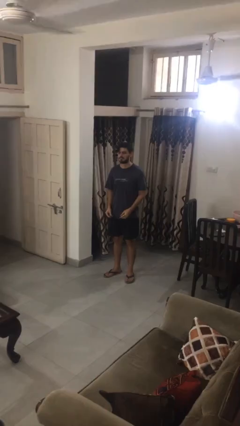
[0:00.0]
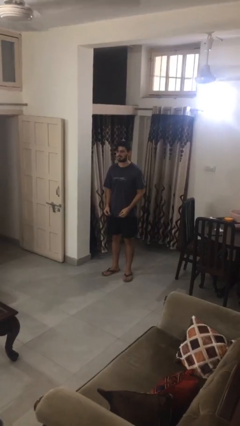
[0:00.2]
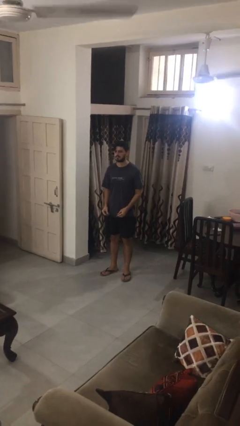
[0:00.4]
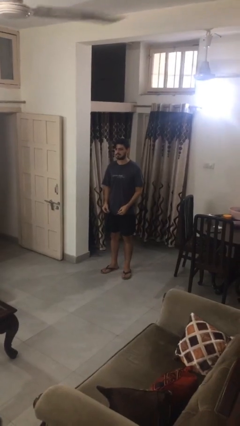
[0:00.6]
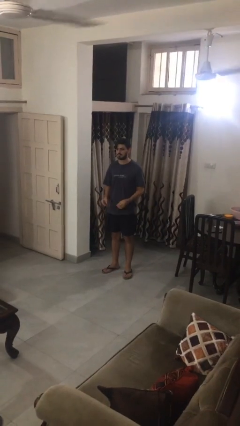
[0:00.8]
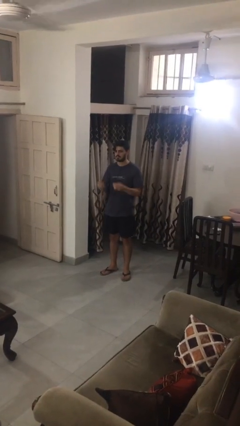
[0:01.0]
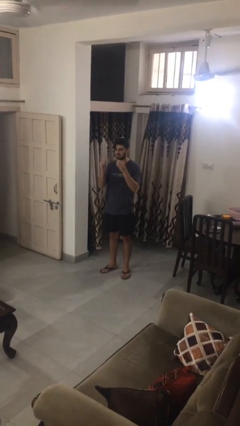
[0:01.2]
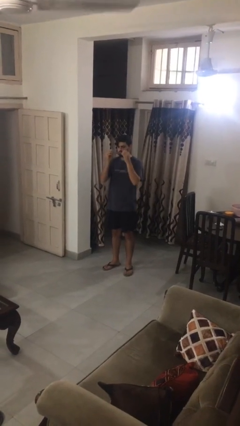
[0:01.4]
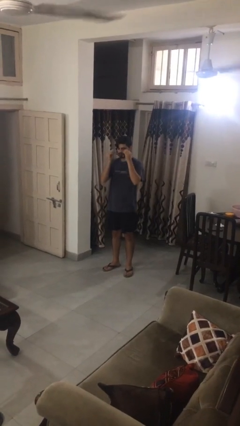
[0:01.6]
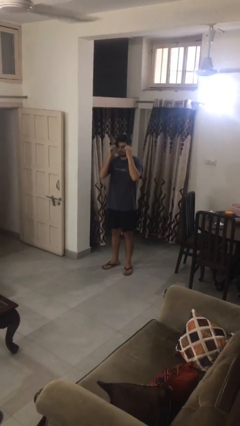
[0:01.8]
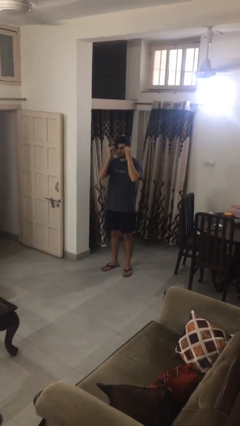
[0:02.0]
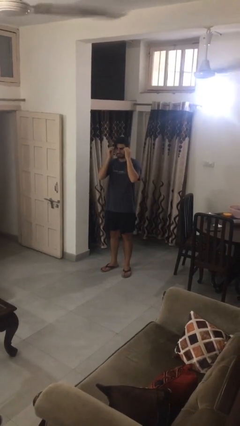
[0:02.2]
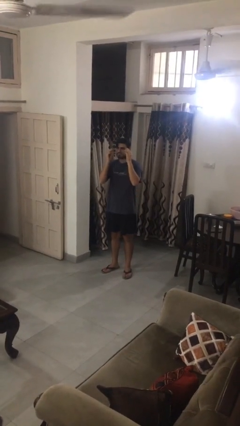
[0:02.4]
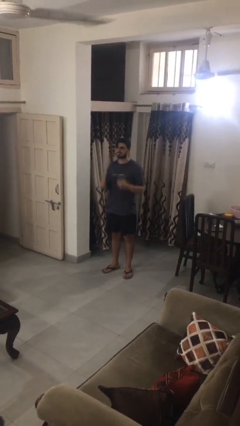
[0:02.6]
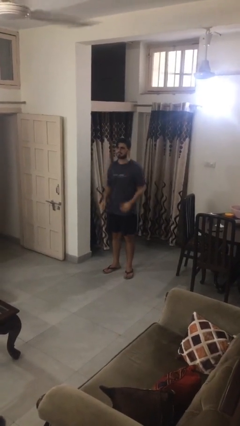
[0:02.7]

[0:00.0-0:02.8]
person puts on glasses

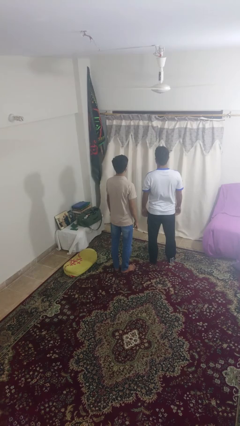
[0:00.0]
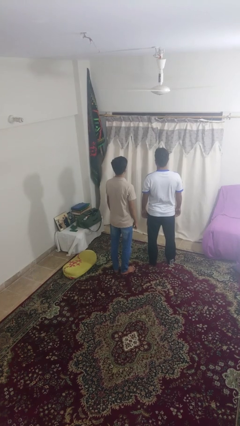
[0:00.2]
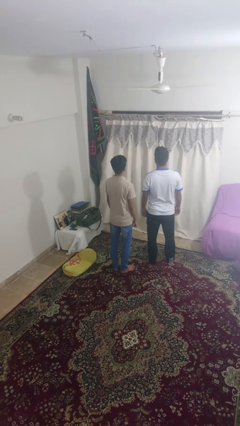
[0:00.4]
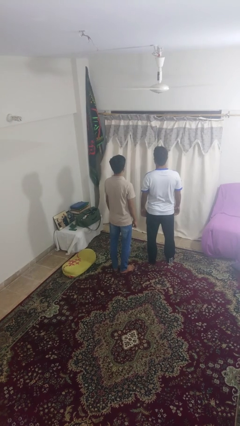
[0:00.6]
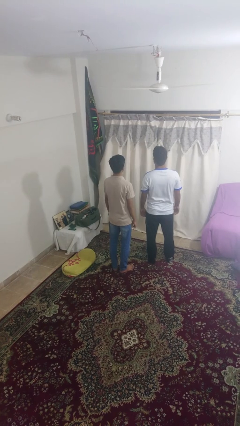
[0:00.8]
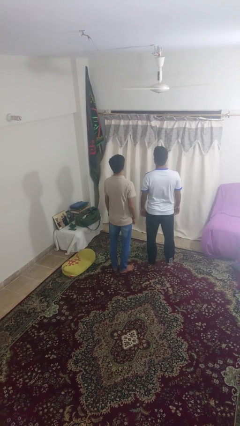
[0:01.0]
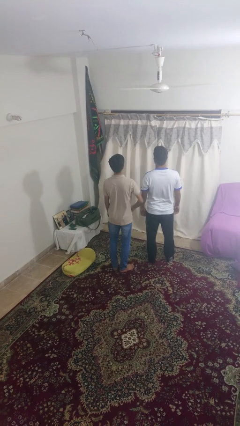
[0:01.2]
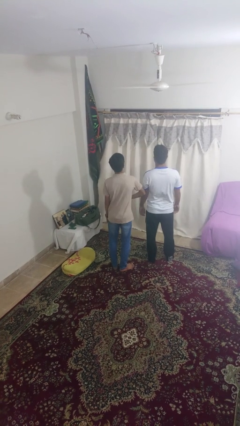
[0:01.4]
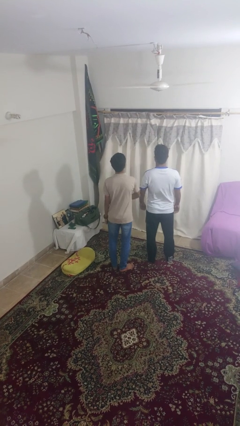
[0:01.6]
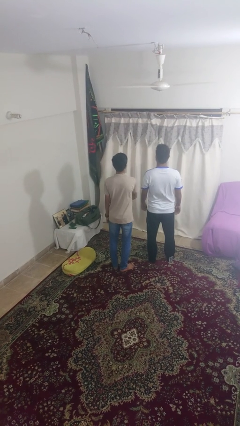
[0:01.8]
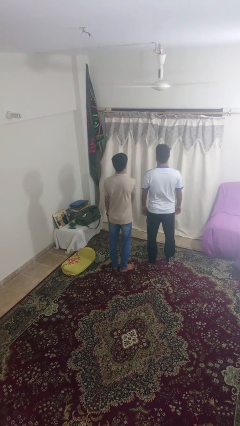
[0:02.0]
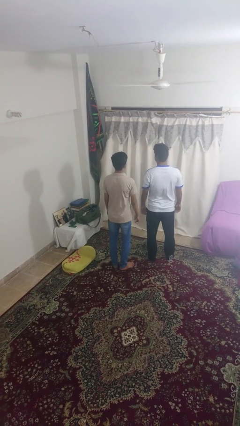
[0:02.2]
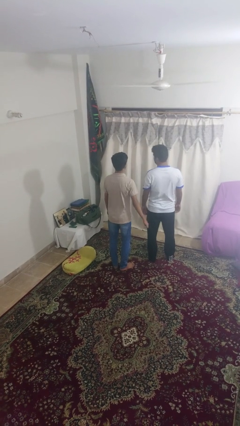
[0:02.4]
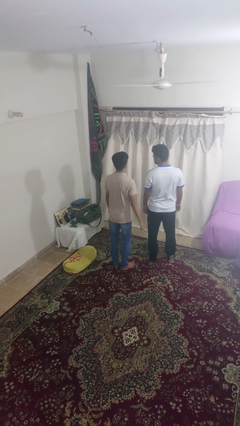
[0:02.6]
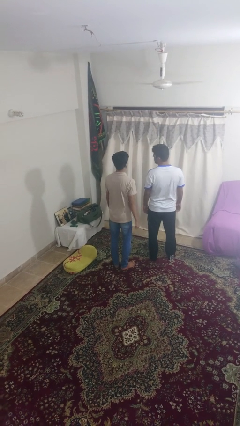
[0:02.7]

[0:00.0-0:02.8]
person nudges person with elbow

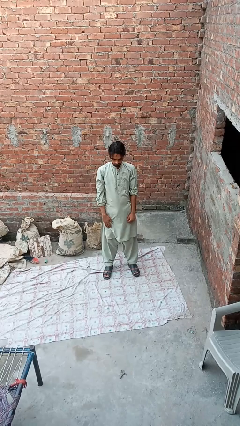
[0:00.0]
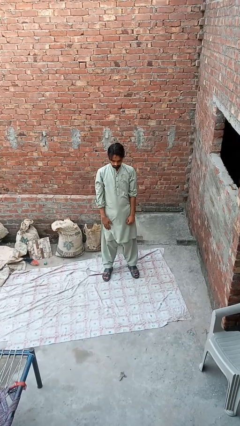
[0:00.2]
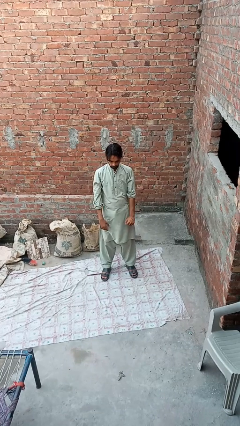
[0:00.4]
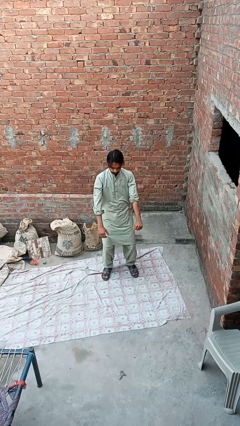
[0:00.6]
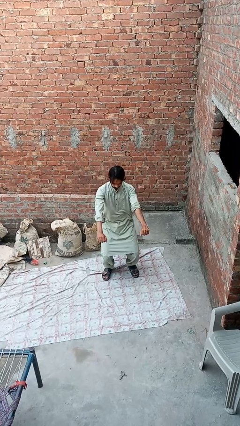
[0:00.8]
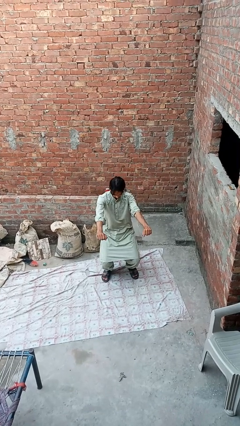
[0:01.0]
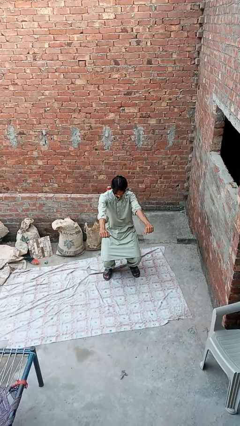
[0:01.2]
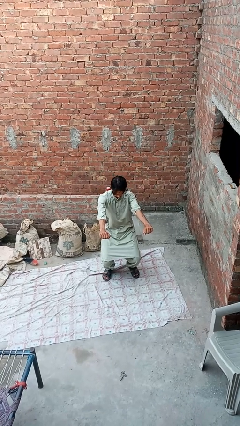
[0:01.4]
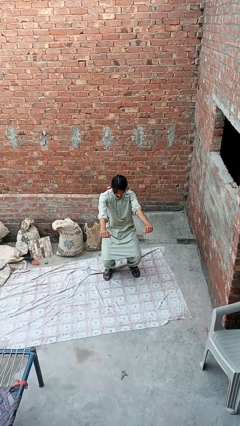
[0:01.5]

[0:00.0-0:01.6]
person squats

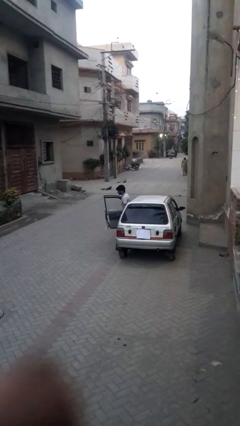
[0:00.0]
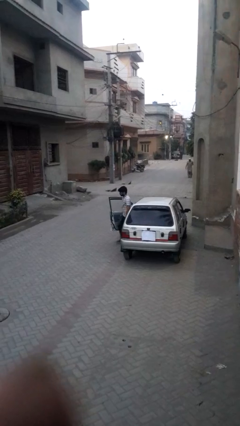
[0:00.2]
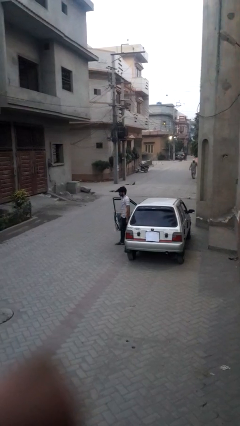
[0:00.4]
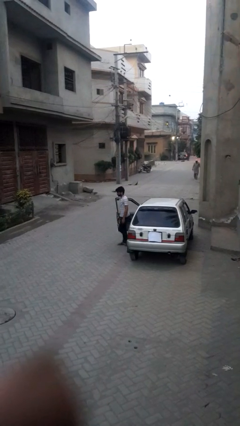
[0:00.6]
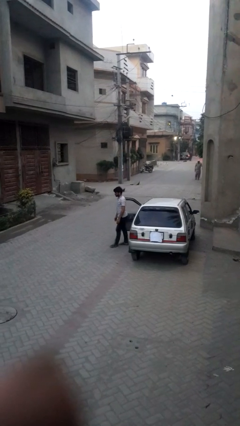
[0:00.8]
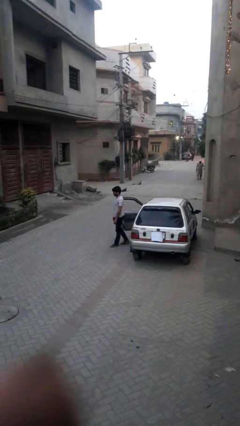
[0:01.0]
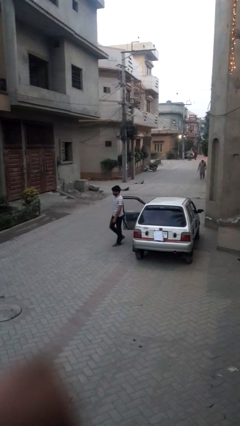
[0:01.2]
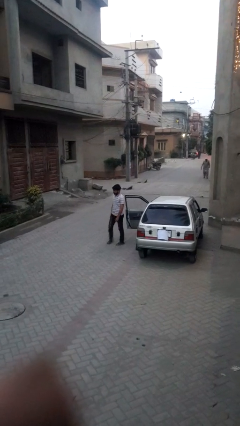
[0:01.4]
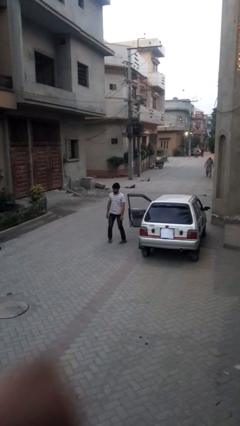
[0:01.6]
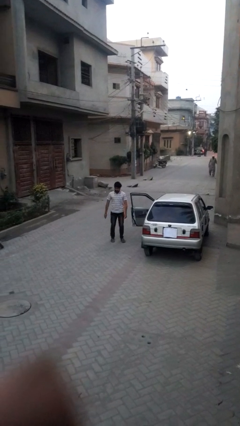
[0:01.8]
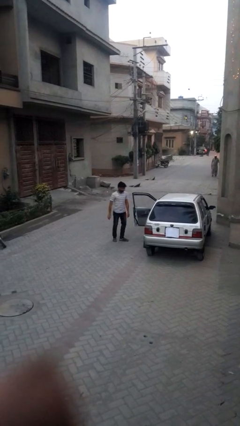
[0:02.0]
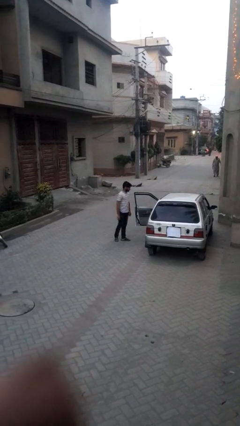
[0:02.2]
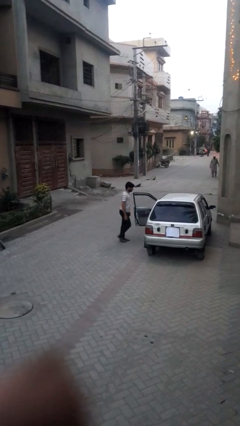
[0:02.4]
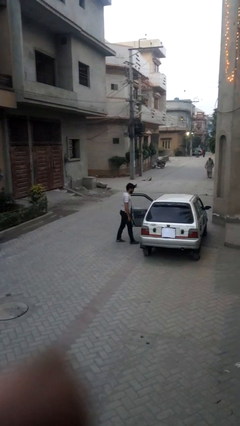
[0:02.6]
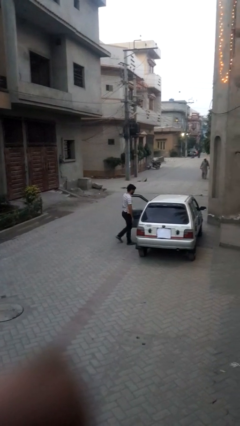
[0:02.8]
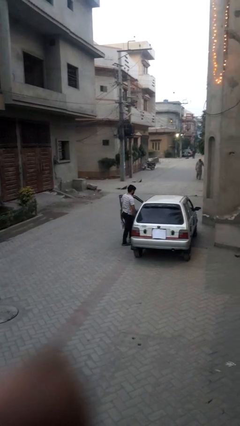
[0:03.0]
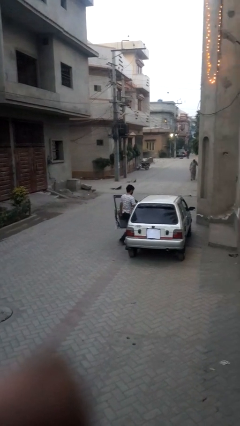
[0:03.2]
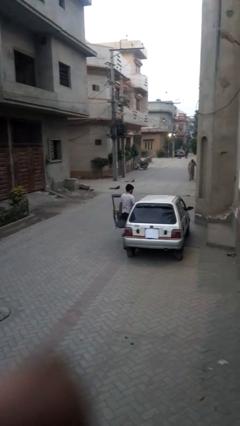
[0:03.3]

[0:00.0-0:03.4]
person exits car

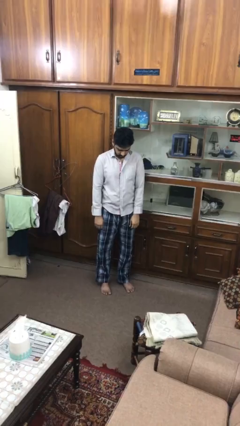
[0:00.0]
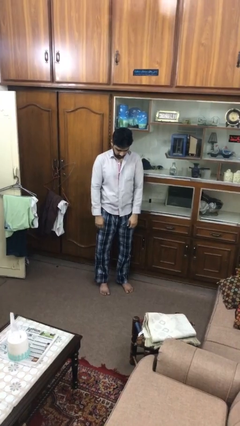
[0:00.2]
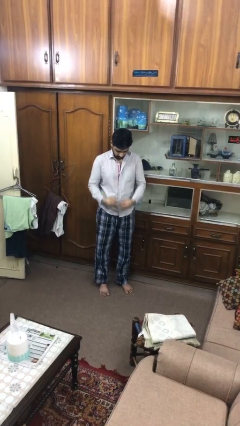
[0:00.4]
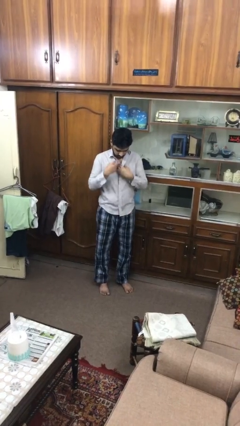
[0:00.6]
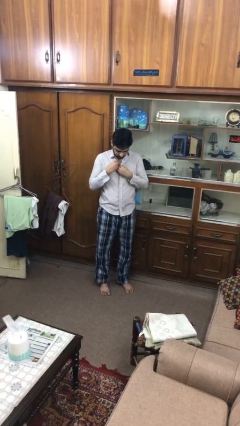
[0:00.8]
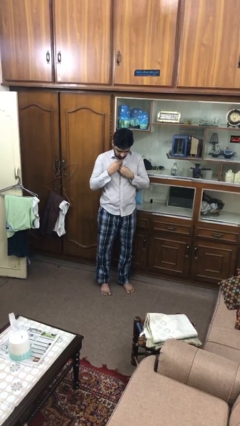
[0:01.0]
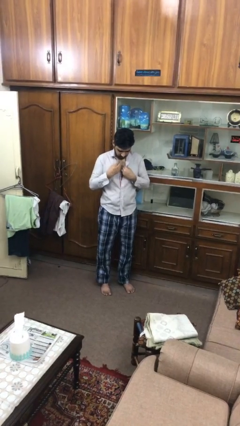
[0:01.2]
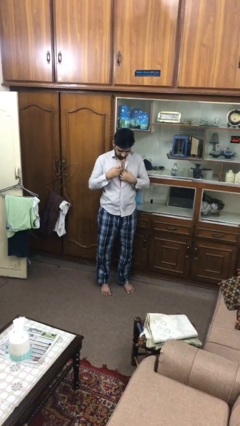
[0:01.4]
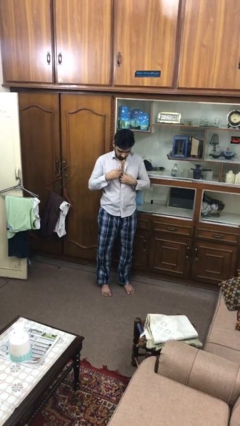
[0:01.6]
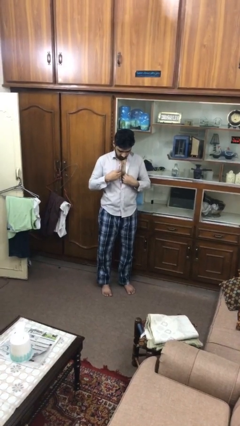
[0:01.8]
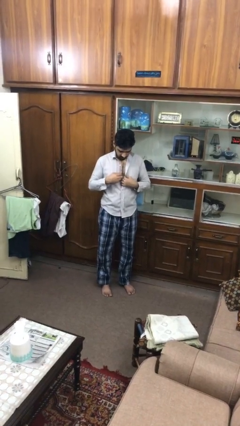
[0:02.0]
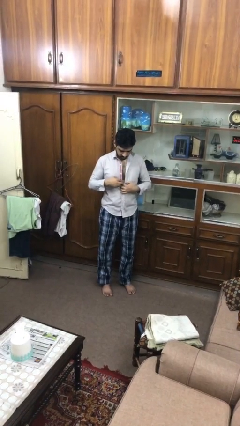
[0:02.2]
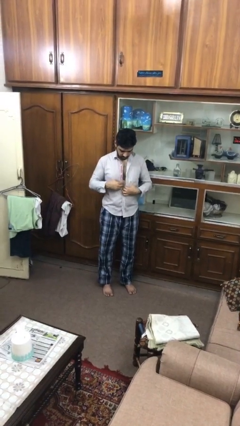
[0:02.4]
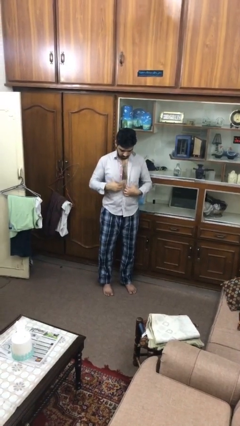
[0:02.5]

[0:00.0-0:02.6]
person unbuttons shirt

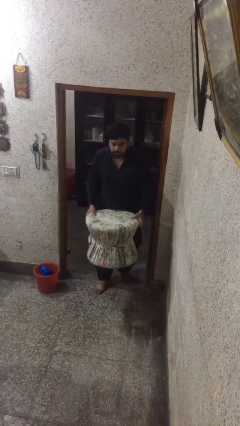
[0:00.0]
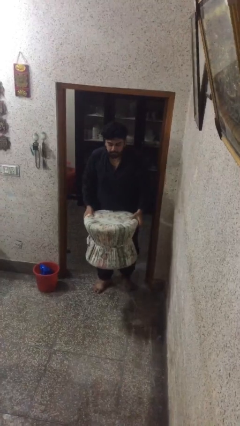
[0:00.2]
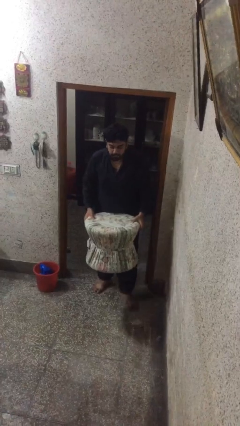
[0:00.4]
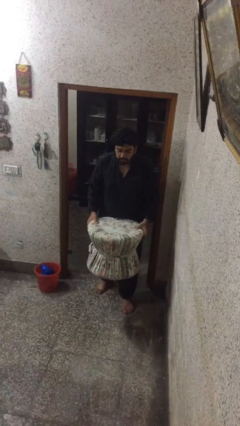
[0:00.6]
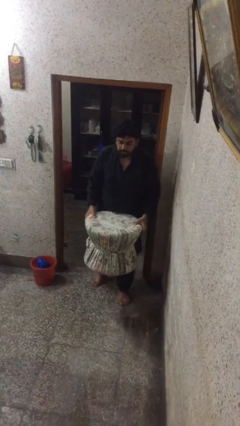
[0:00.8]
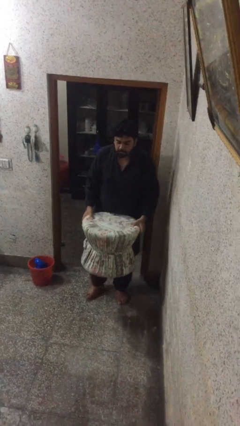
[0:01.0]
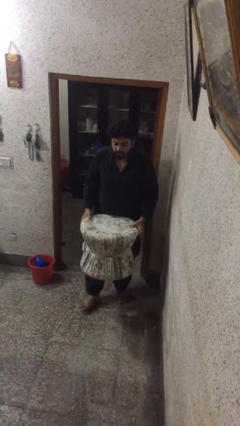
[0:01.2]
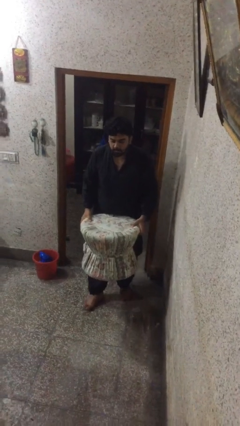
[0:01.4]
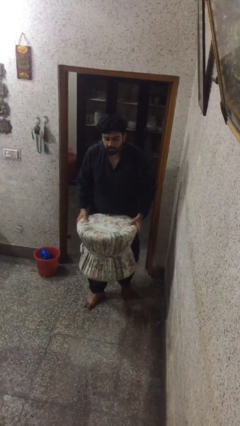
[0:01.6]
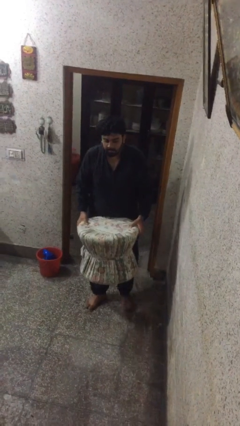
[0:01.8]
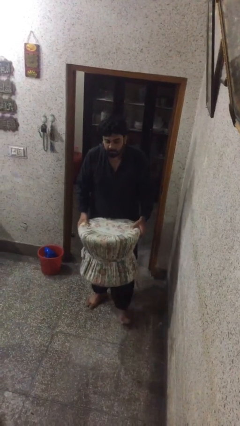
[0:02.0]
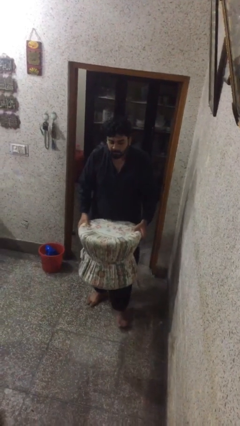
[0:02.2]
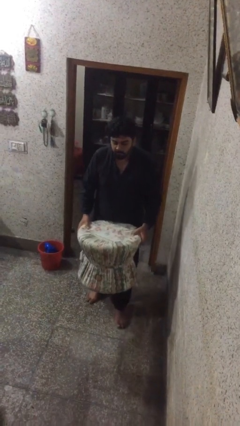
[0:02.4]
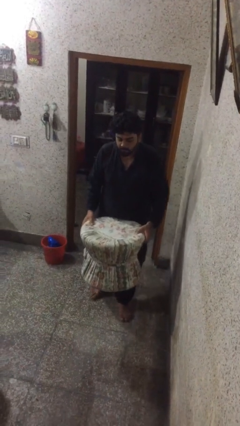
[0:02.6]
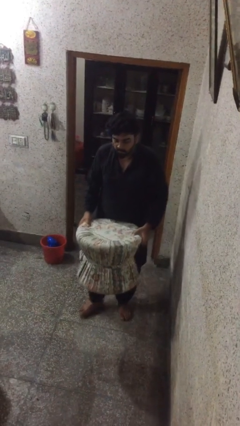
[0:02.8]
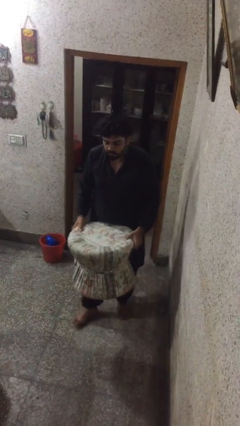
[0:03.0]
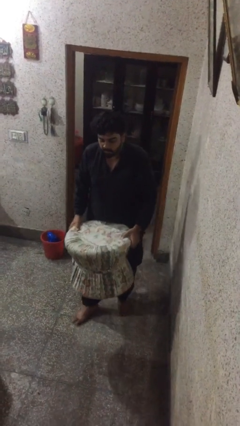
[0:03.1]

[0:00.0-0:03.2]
person carries heavy object

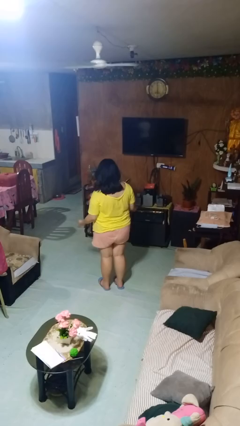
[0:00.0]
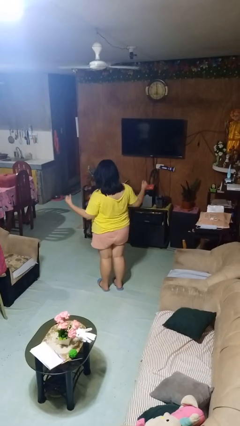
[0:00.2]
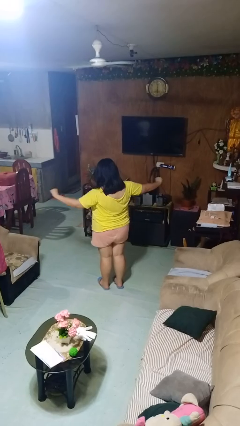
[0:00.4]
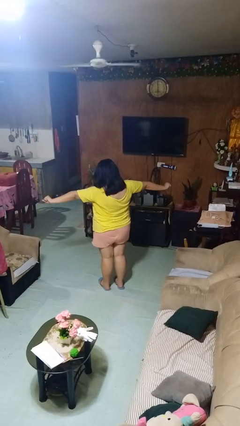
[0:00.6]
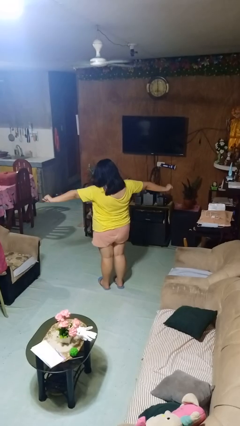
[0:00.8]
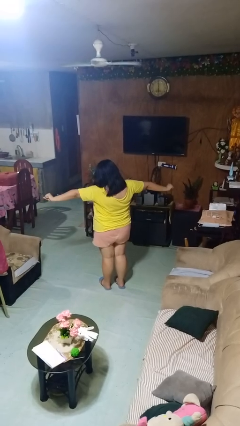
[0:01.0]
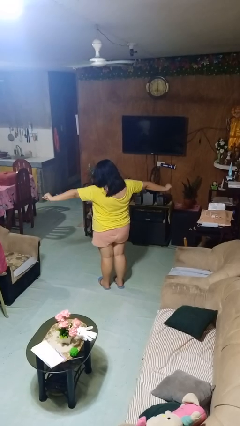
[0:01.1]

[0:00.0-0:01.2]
person stretches arms to side
